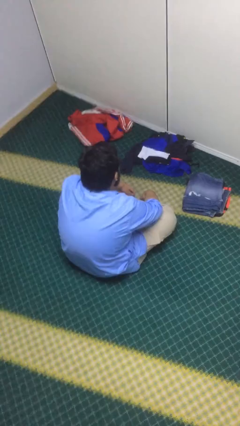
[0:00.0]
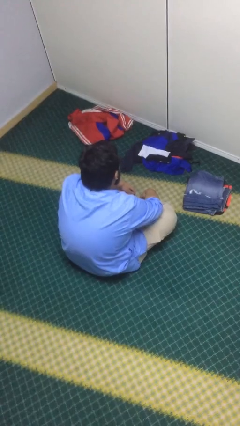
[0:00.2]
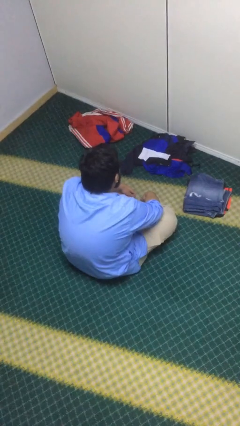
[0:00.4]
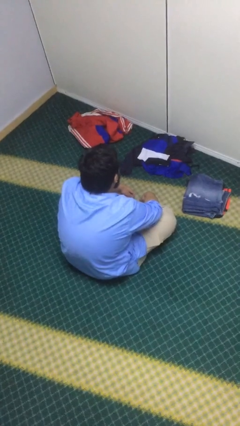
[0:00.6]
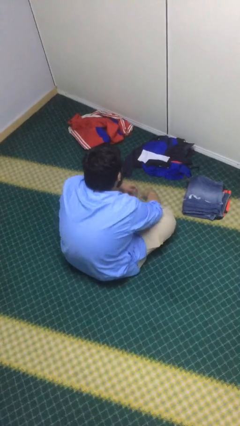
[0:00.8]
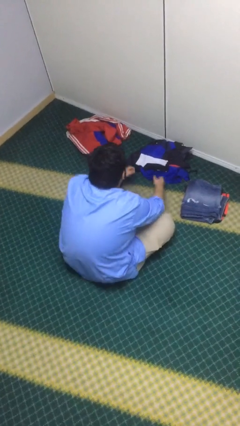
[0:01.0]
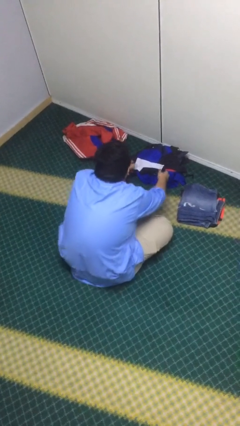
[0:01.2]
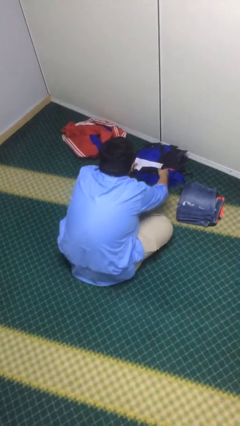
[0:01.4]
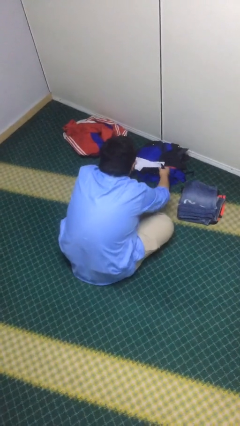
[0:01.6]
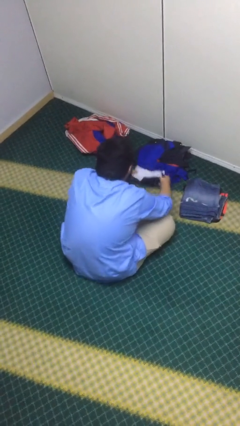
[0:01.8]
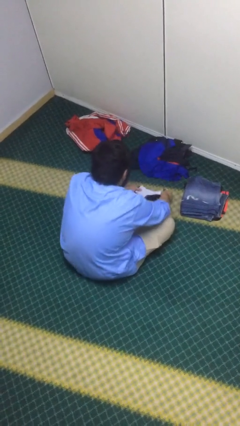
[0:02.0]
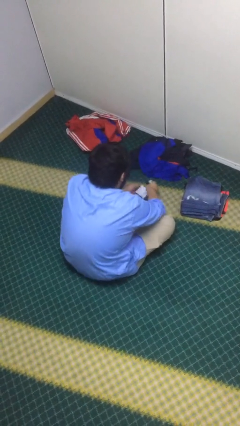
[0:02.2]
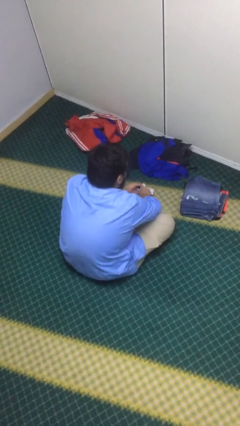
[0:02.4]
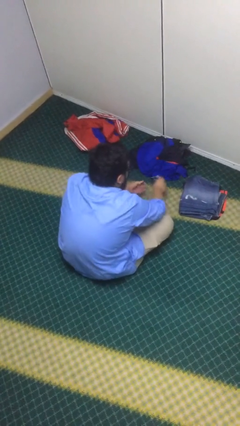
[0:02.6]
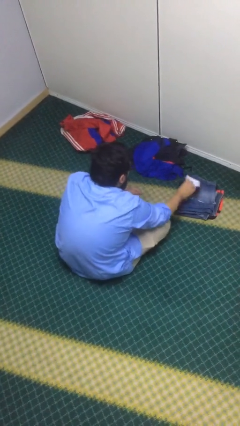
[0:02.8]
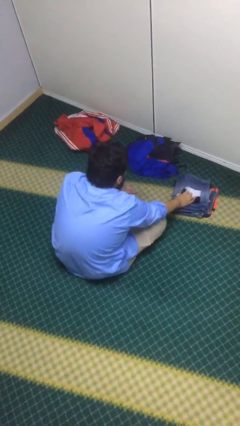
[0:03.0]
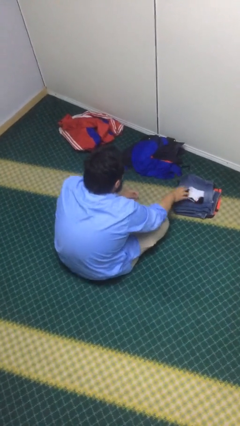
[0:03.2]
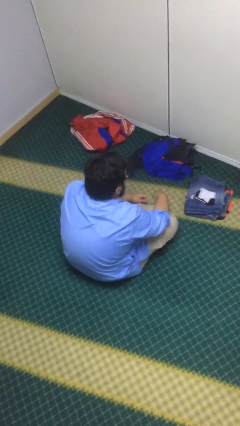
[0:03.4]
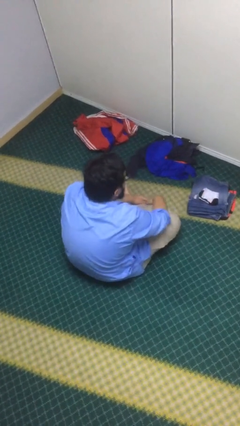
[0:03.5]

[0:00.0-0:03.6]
person folds socks

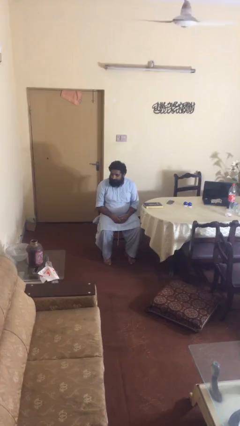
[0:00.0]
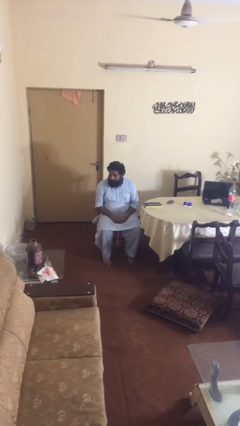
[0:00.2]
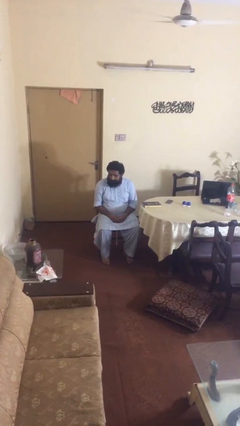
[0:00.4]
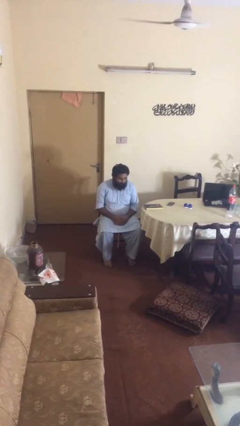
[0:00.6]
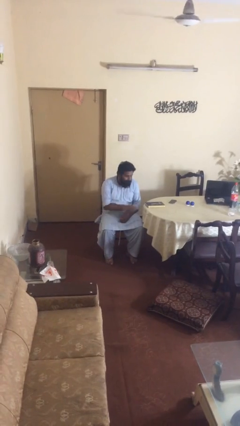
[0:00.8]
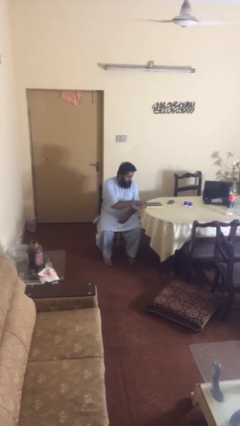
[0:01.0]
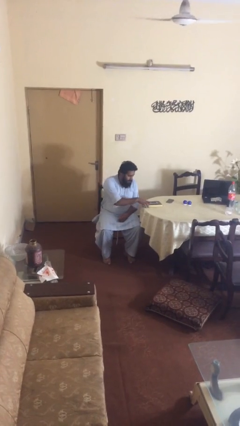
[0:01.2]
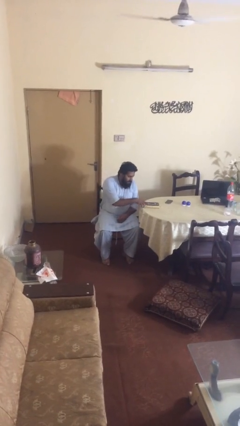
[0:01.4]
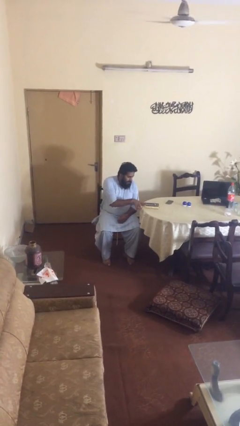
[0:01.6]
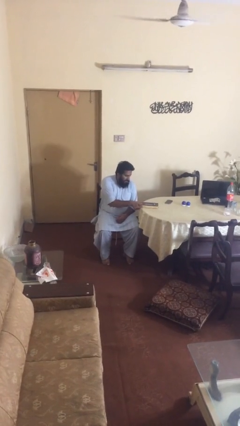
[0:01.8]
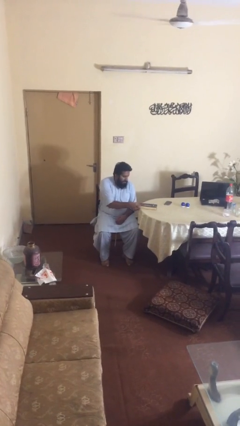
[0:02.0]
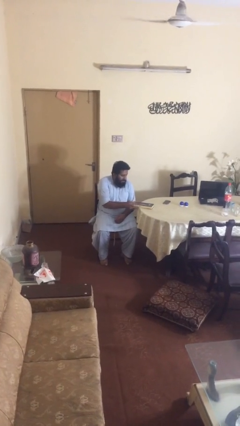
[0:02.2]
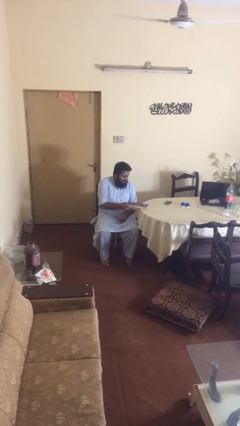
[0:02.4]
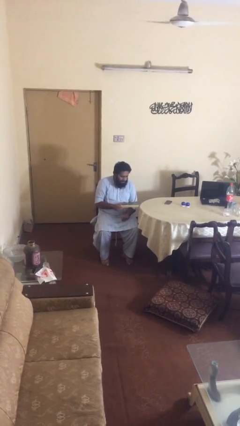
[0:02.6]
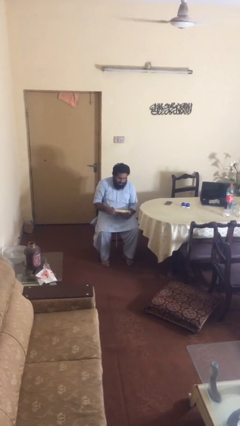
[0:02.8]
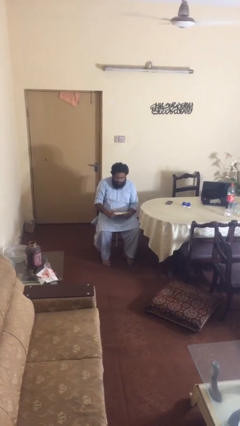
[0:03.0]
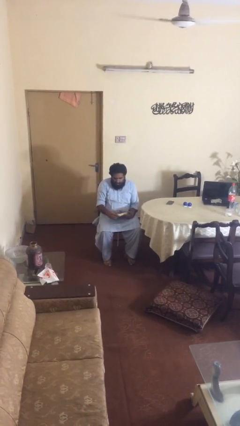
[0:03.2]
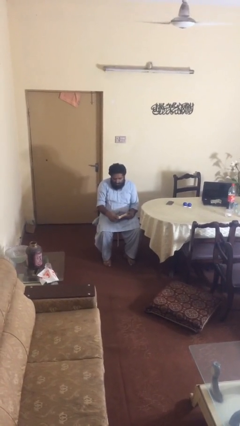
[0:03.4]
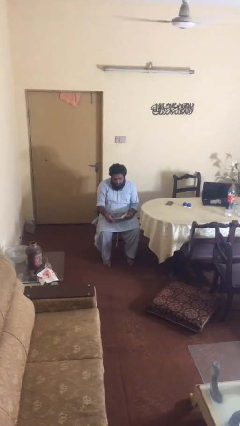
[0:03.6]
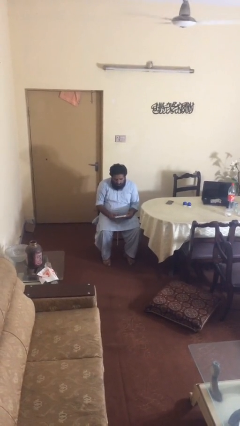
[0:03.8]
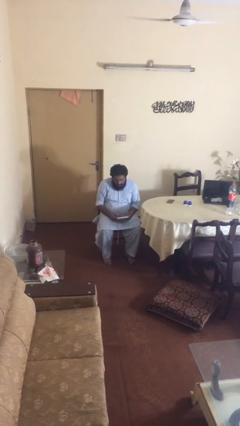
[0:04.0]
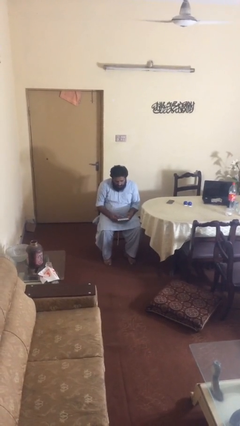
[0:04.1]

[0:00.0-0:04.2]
person picks up object from table

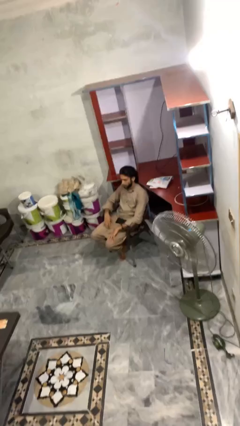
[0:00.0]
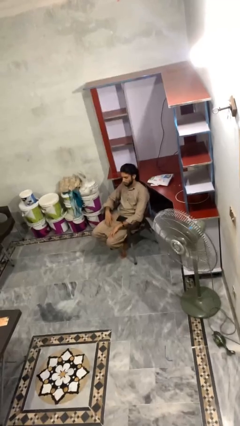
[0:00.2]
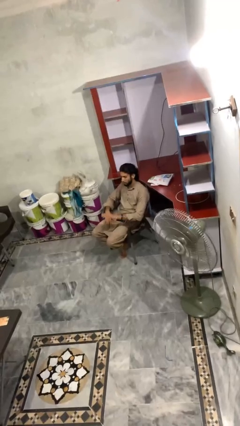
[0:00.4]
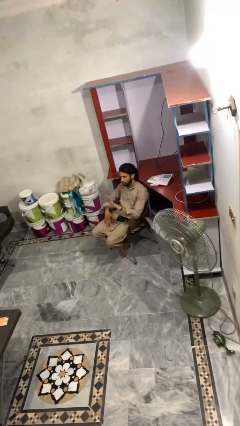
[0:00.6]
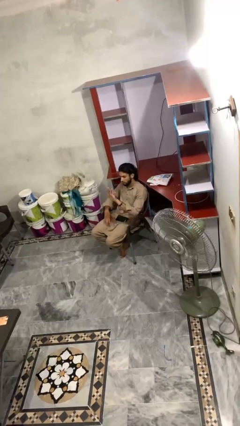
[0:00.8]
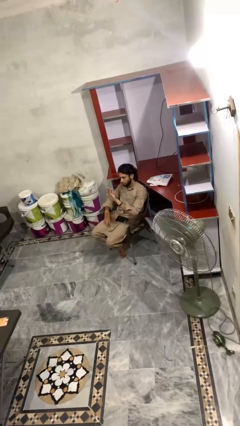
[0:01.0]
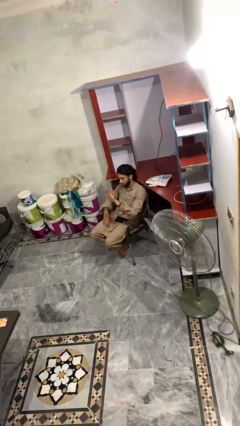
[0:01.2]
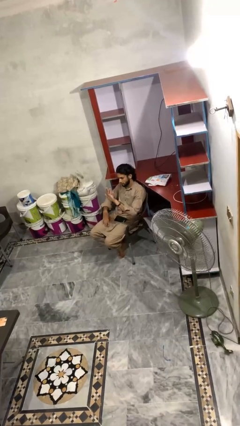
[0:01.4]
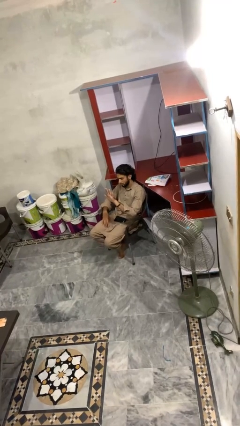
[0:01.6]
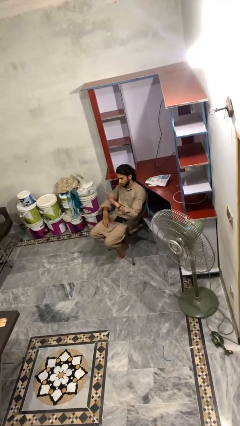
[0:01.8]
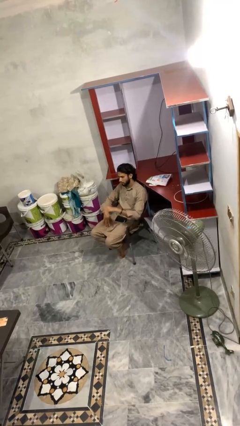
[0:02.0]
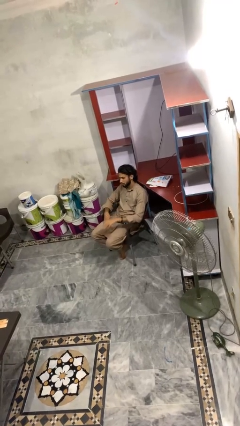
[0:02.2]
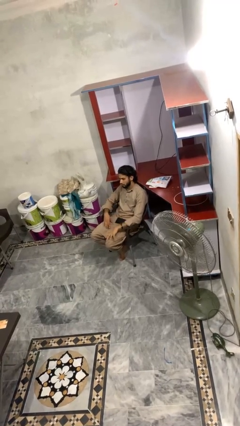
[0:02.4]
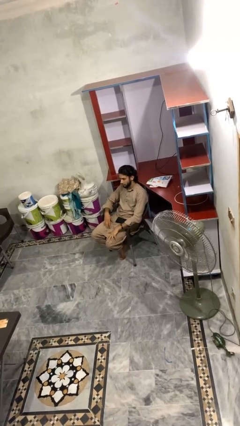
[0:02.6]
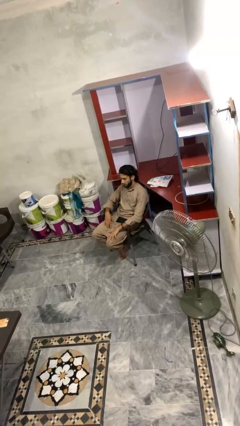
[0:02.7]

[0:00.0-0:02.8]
person gestures number five

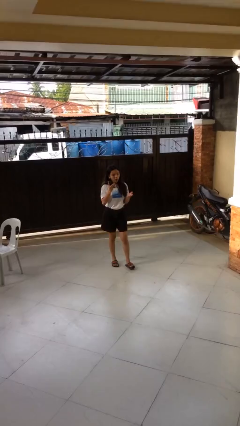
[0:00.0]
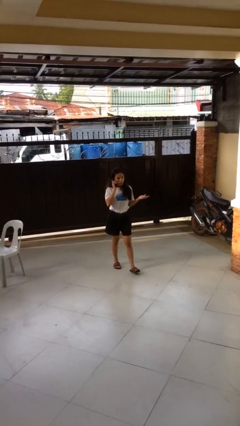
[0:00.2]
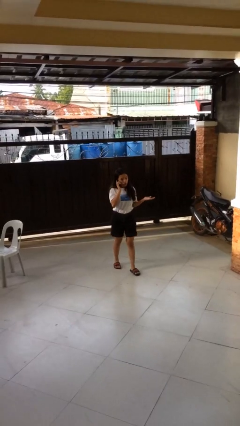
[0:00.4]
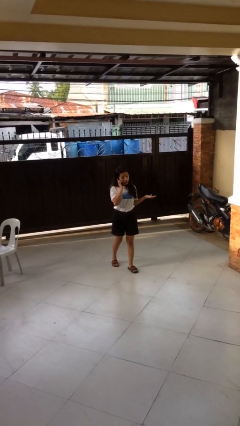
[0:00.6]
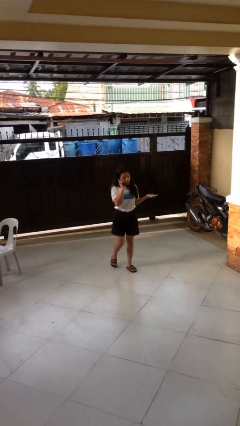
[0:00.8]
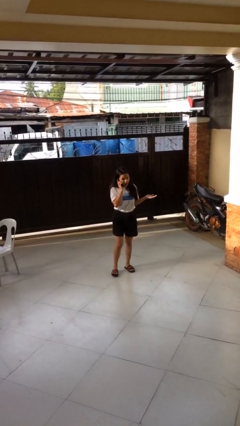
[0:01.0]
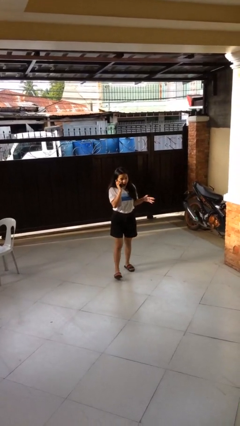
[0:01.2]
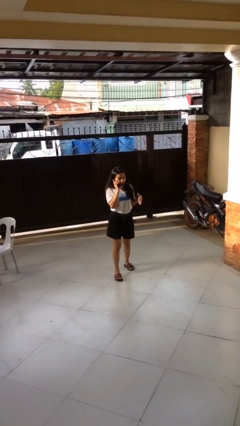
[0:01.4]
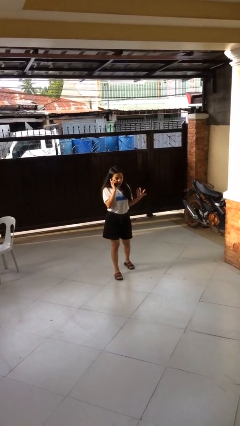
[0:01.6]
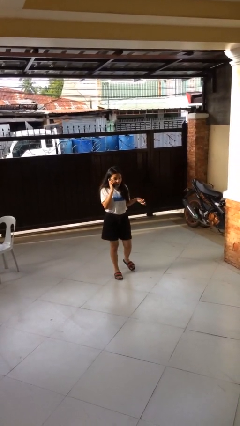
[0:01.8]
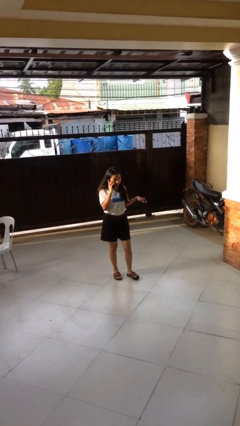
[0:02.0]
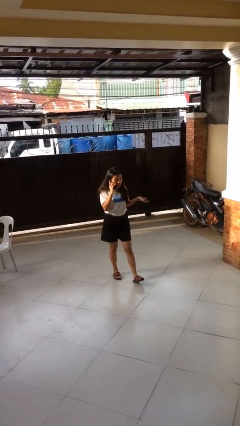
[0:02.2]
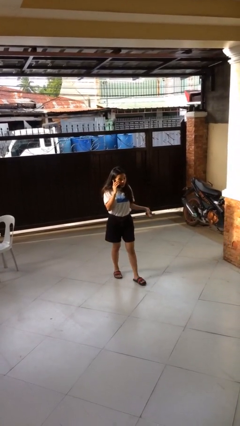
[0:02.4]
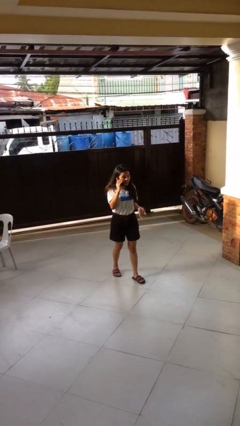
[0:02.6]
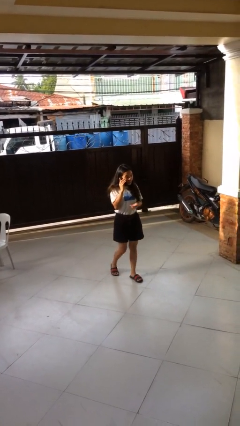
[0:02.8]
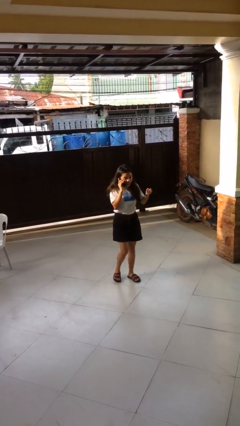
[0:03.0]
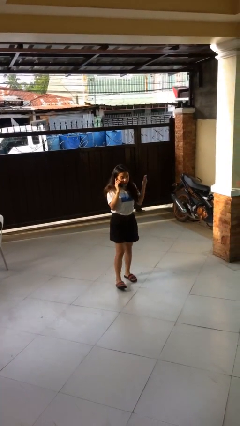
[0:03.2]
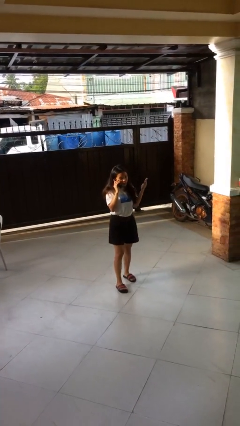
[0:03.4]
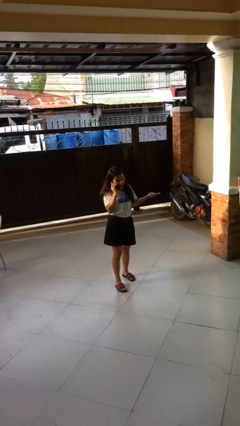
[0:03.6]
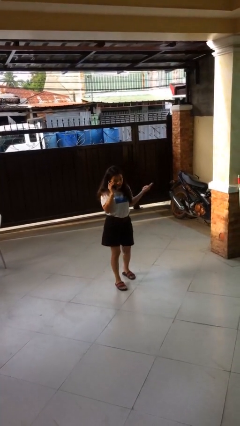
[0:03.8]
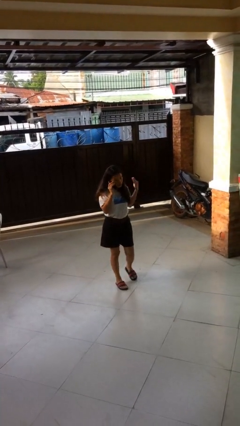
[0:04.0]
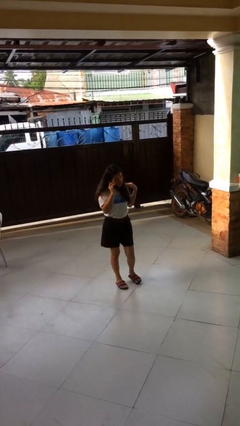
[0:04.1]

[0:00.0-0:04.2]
person talks on phone

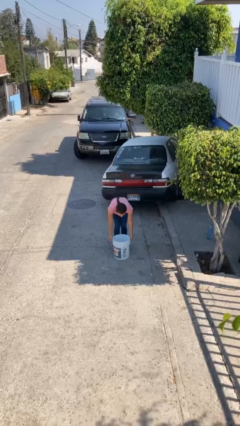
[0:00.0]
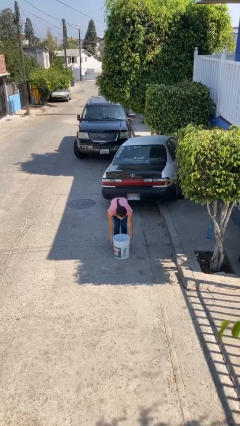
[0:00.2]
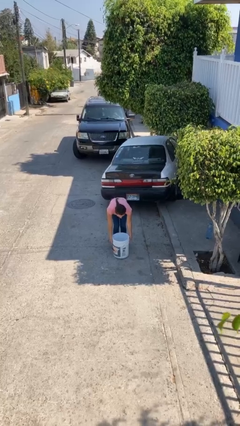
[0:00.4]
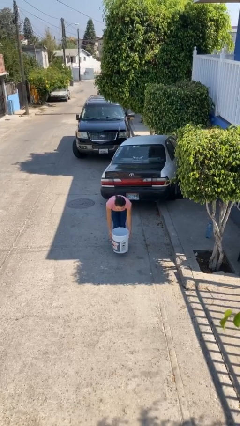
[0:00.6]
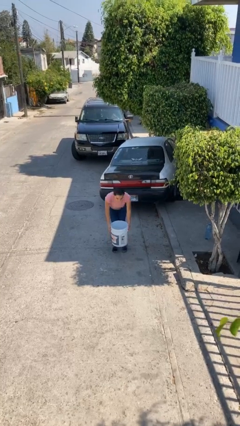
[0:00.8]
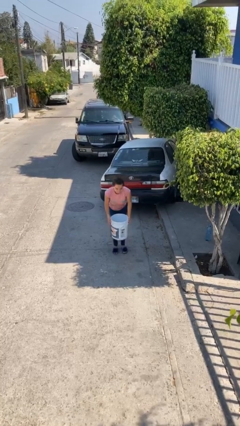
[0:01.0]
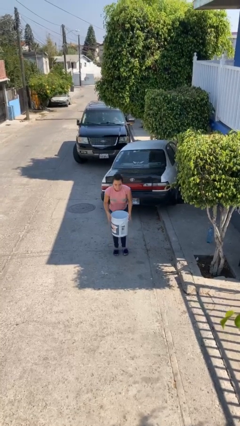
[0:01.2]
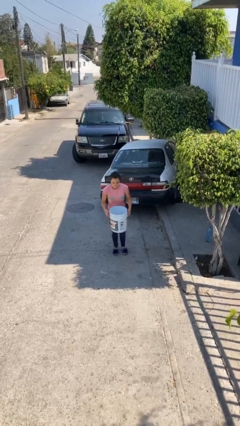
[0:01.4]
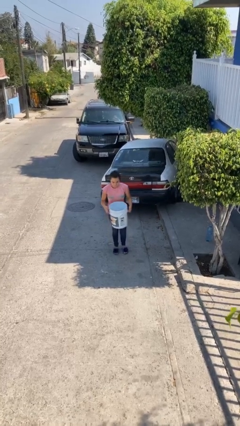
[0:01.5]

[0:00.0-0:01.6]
person picks up object from floor

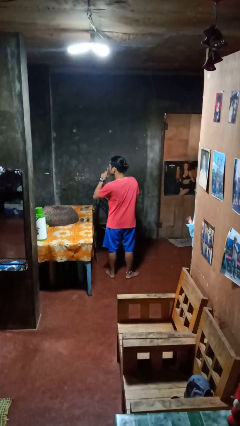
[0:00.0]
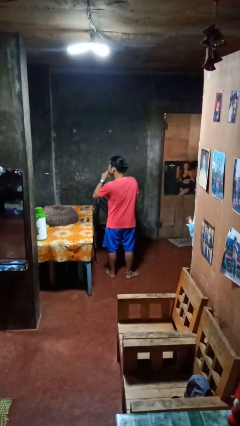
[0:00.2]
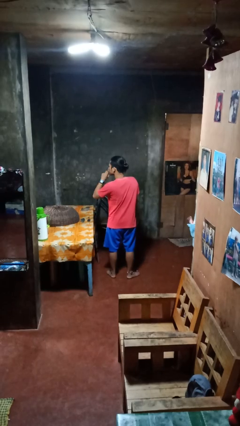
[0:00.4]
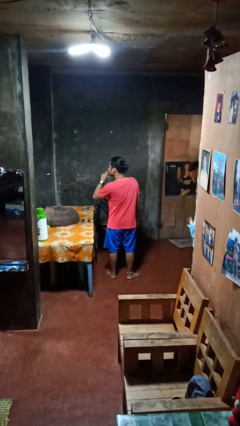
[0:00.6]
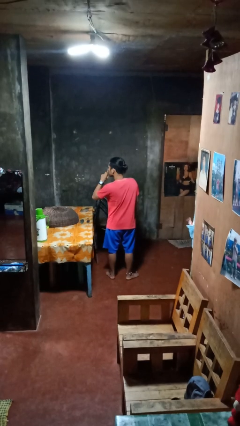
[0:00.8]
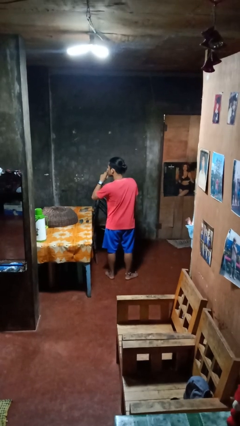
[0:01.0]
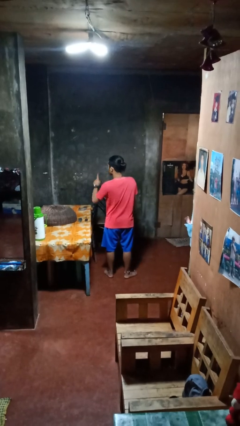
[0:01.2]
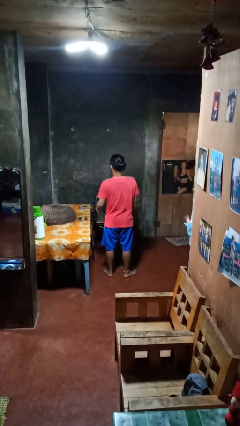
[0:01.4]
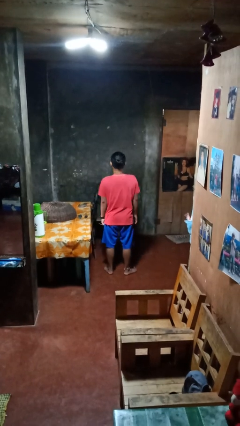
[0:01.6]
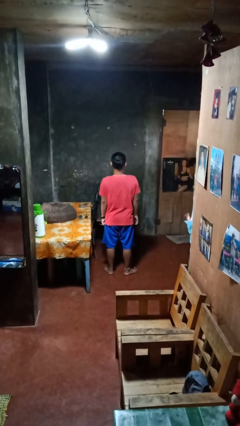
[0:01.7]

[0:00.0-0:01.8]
person gestures be quiet
